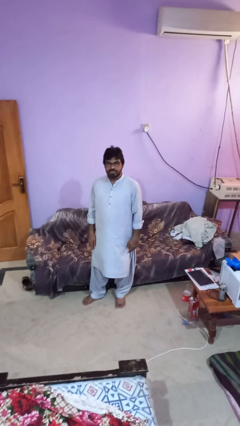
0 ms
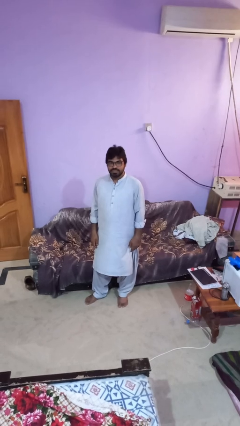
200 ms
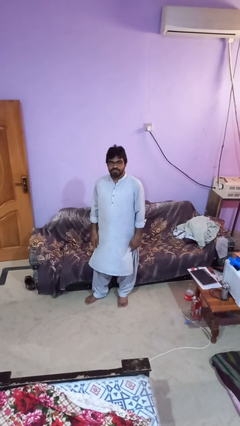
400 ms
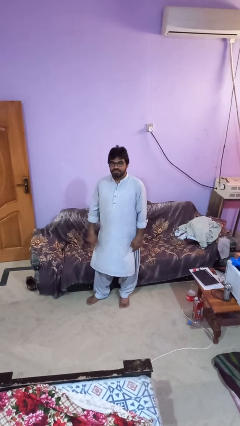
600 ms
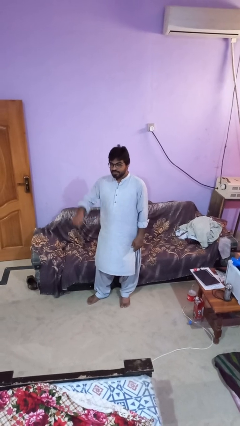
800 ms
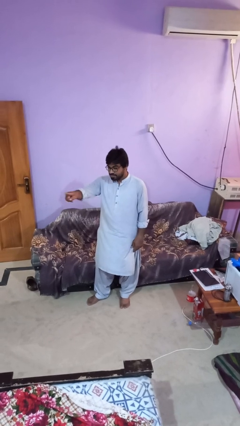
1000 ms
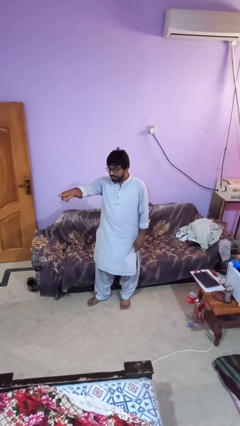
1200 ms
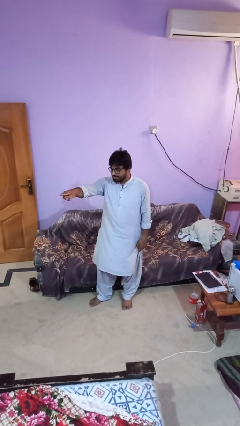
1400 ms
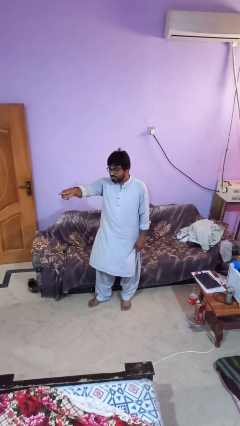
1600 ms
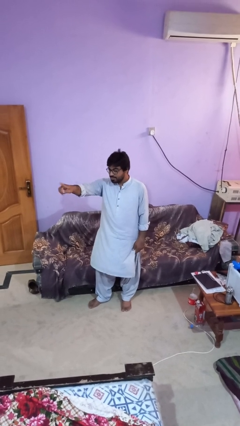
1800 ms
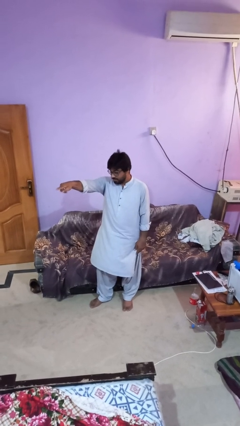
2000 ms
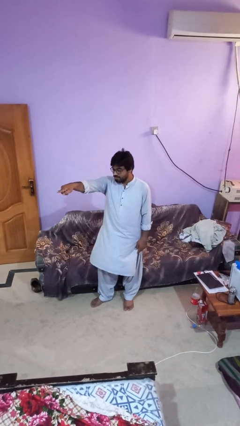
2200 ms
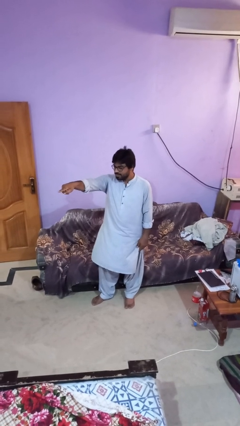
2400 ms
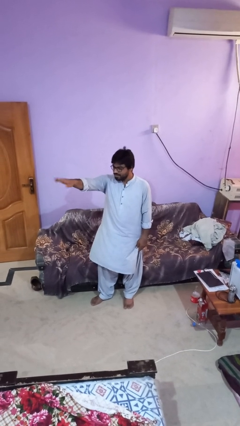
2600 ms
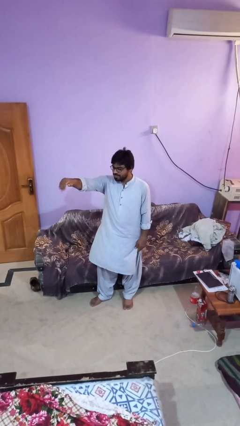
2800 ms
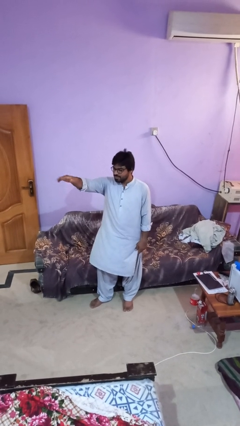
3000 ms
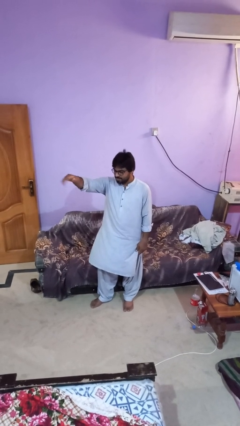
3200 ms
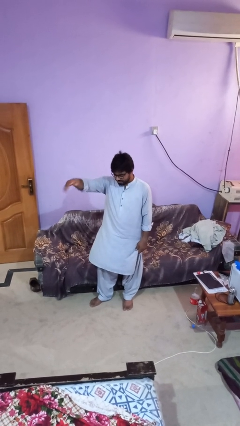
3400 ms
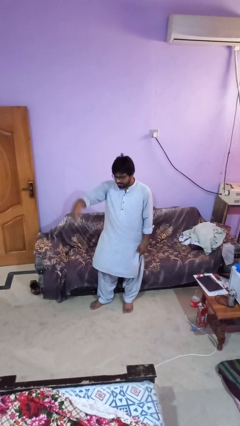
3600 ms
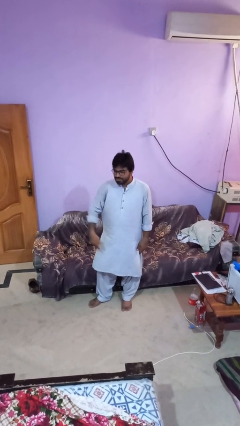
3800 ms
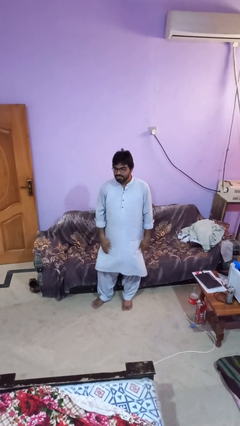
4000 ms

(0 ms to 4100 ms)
person gestures come here

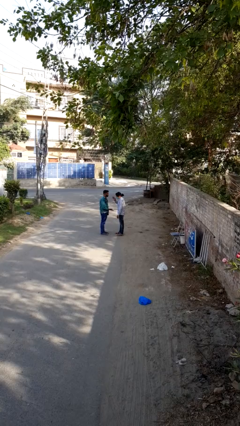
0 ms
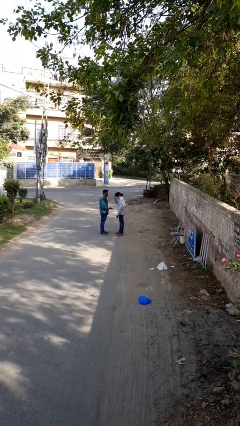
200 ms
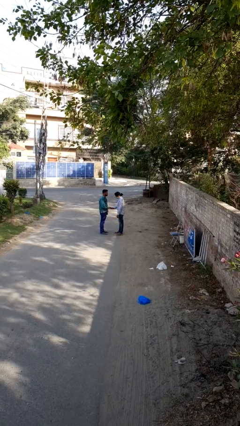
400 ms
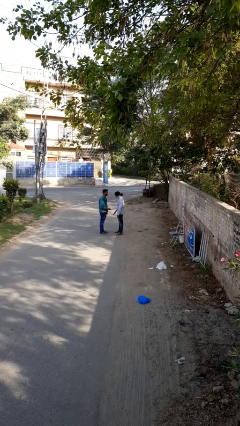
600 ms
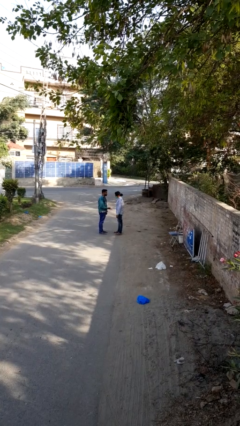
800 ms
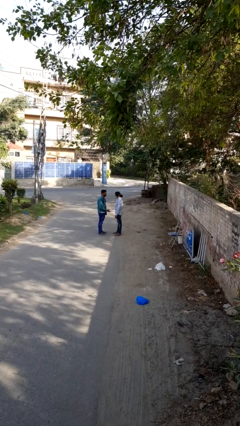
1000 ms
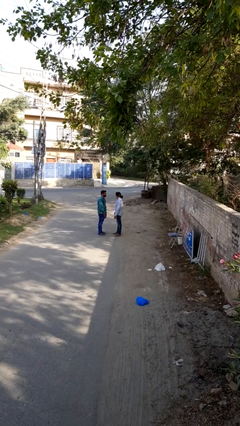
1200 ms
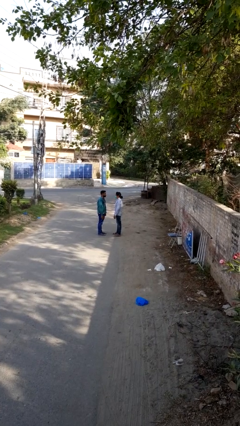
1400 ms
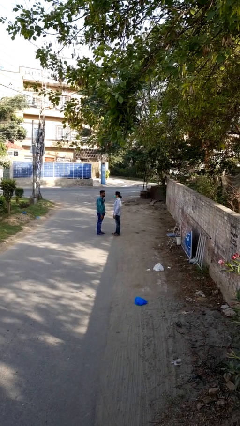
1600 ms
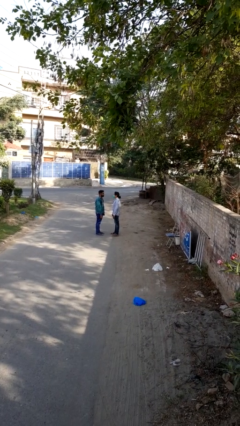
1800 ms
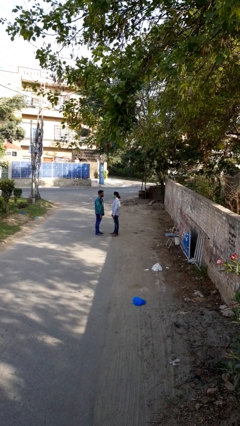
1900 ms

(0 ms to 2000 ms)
person highfives hand

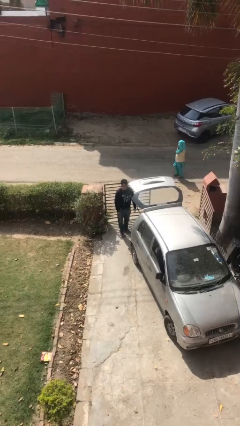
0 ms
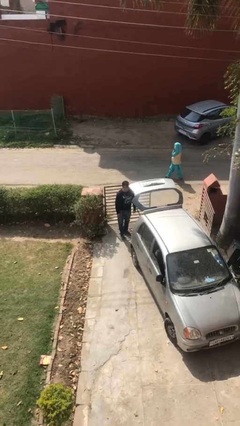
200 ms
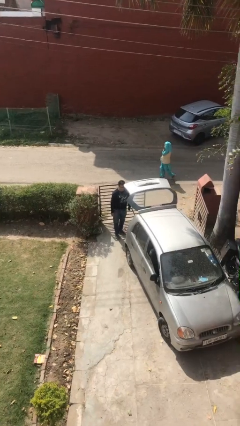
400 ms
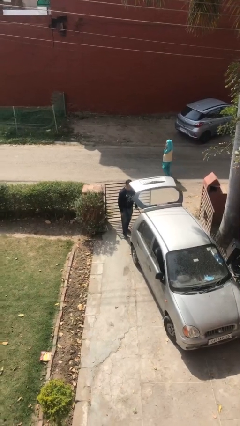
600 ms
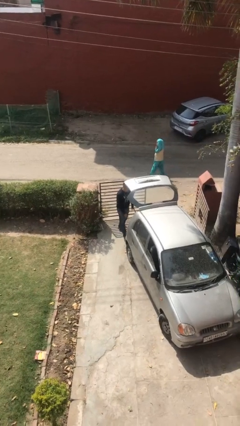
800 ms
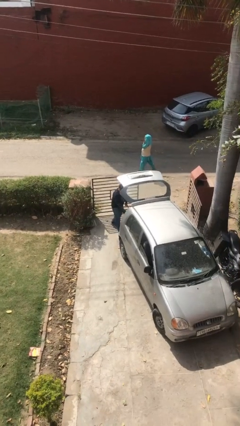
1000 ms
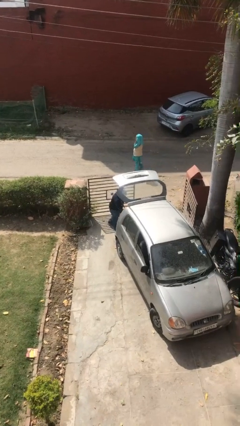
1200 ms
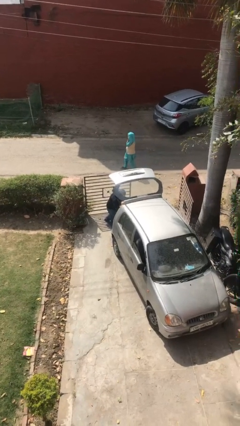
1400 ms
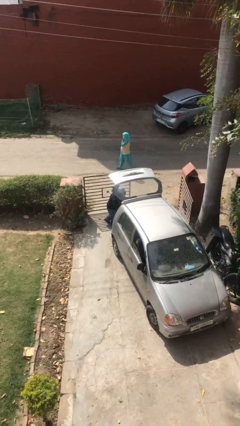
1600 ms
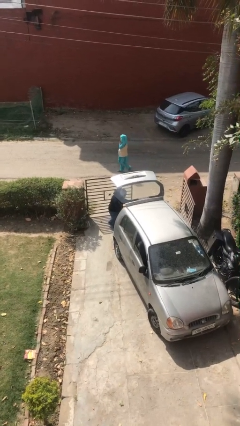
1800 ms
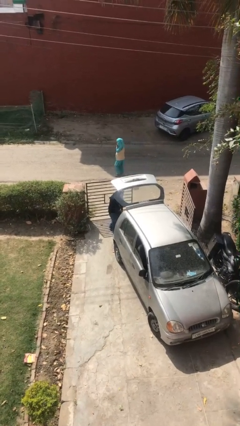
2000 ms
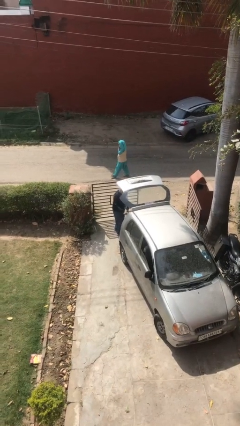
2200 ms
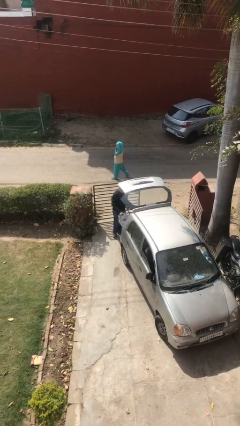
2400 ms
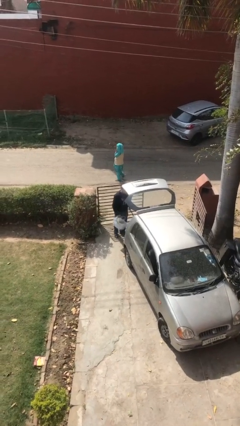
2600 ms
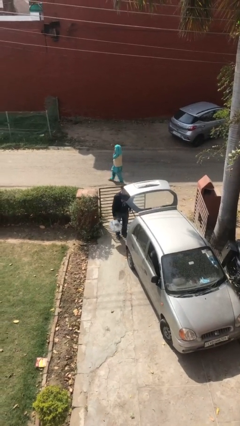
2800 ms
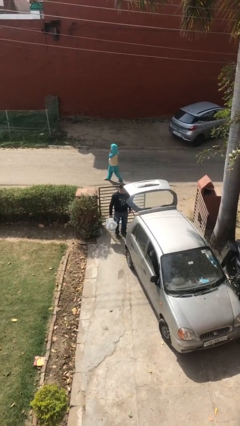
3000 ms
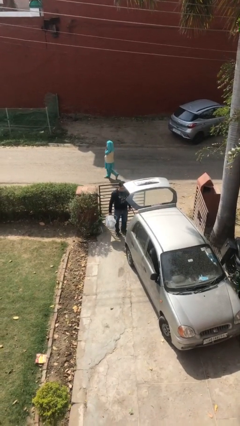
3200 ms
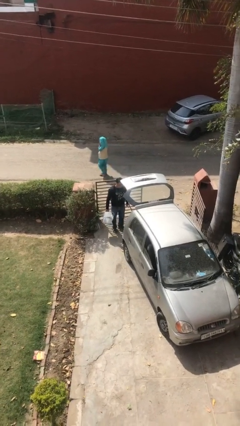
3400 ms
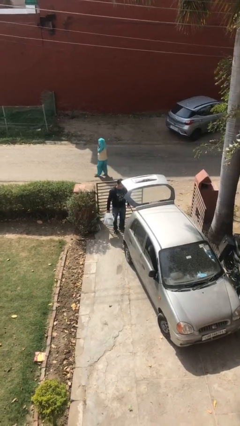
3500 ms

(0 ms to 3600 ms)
person unloads car

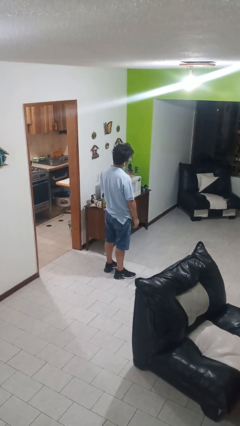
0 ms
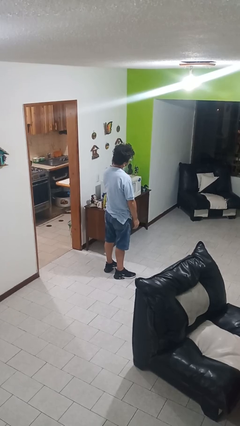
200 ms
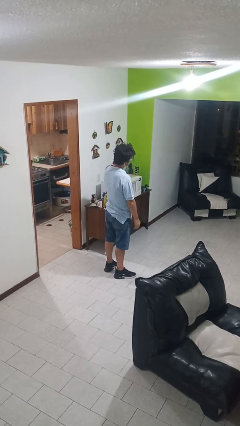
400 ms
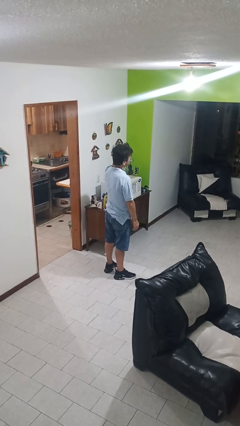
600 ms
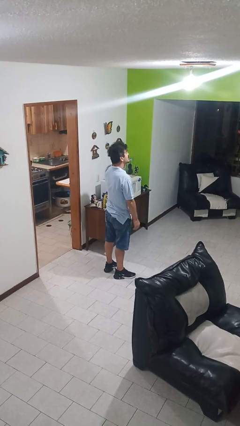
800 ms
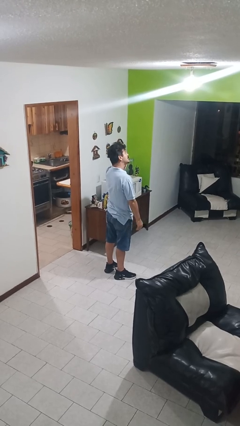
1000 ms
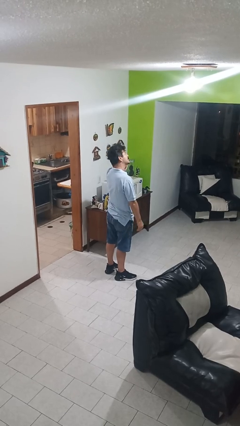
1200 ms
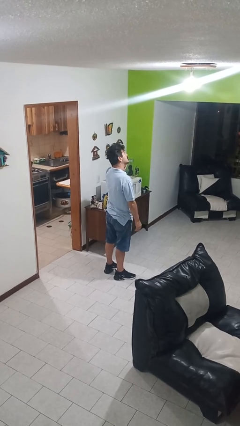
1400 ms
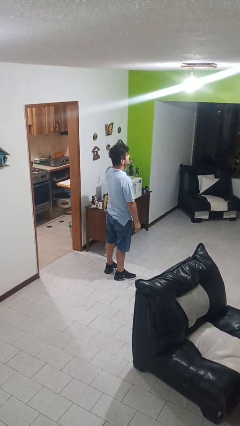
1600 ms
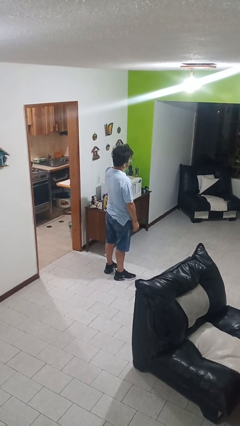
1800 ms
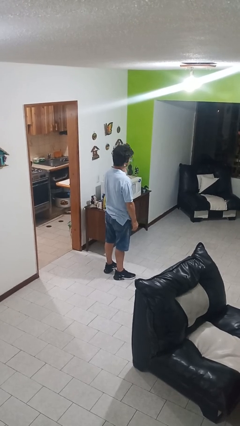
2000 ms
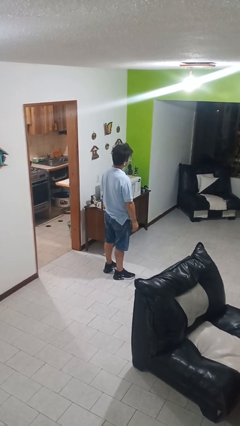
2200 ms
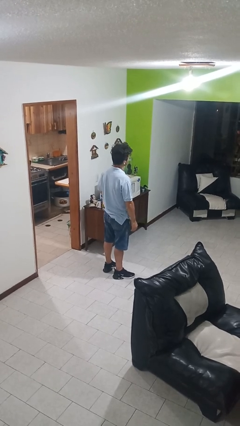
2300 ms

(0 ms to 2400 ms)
person rubs neck

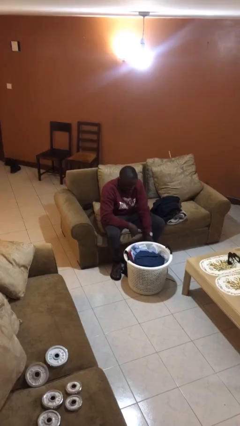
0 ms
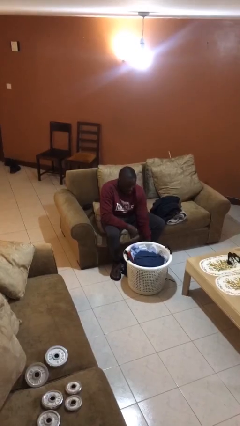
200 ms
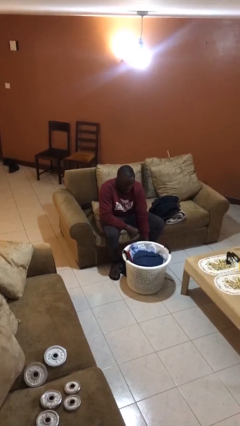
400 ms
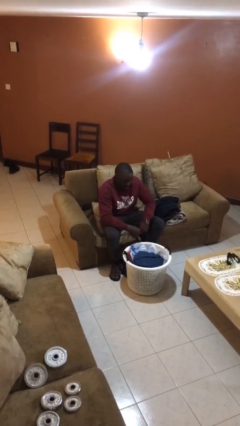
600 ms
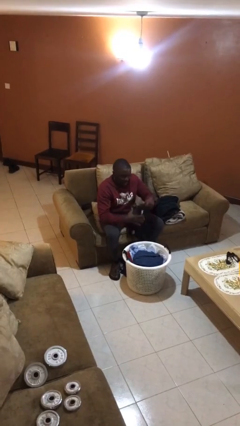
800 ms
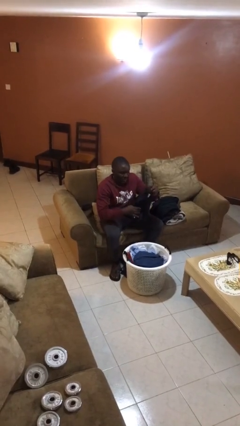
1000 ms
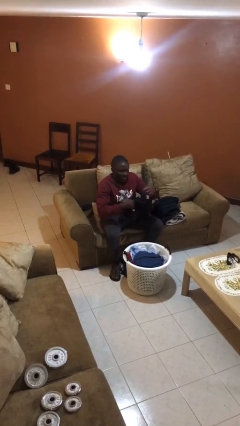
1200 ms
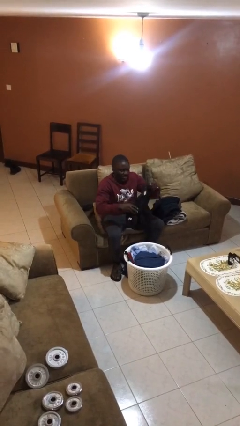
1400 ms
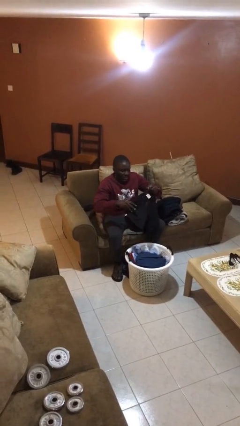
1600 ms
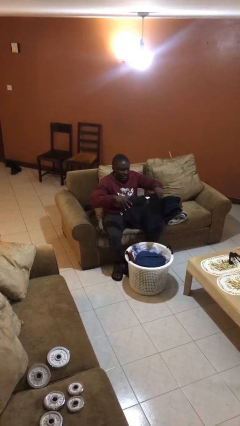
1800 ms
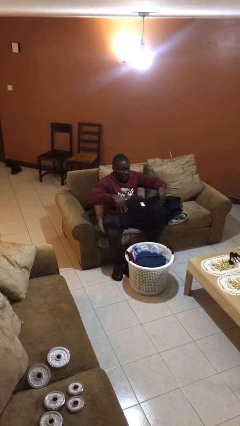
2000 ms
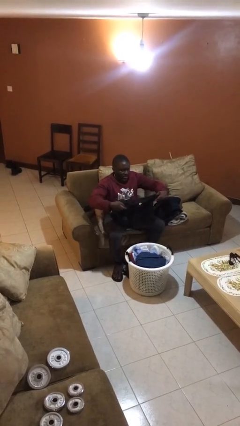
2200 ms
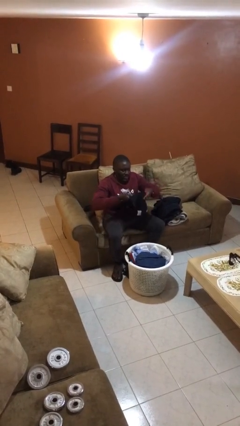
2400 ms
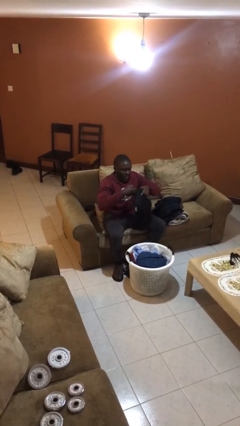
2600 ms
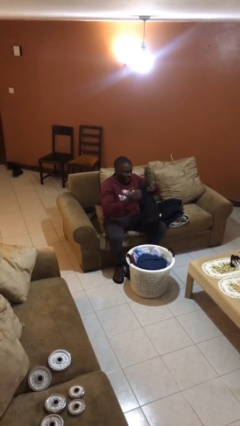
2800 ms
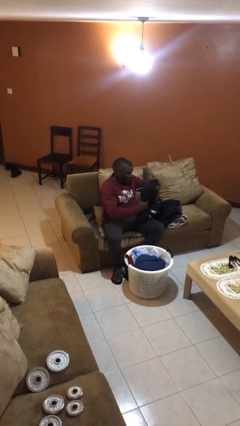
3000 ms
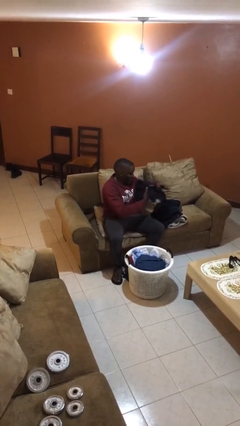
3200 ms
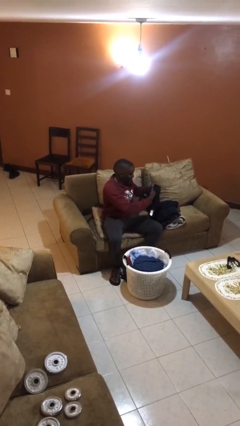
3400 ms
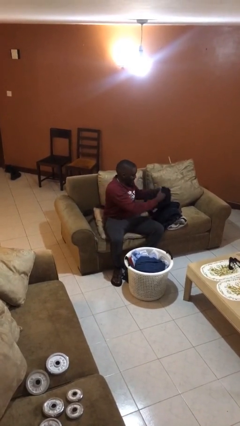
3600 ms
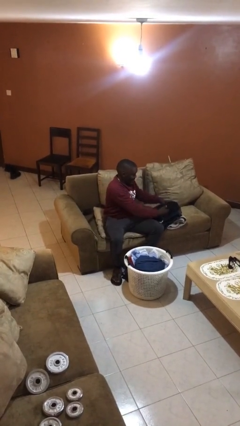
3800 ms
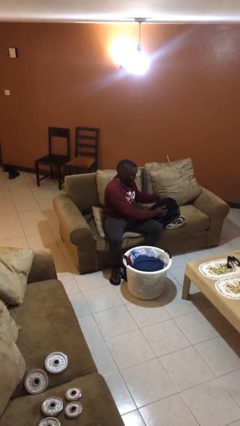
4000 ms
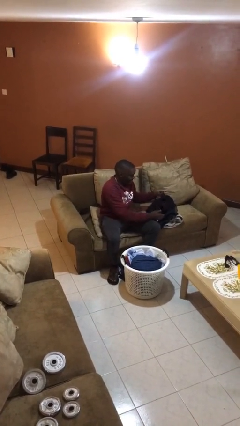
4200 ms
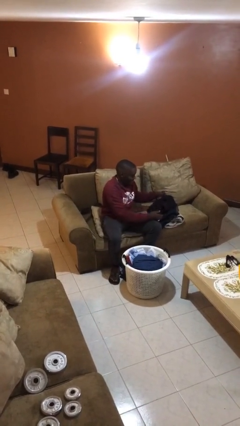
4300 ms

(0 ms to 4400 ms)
person folds pants

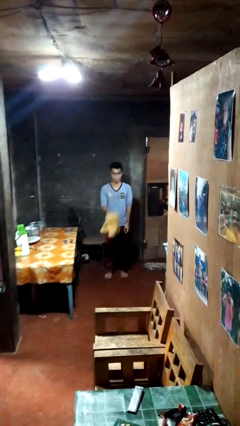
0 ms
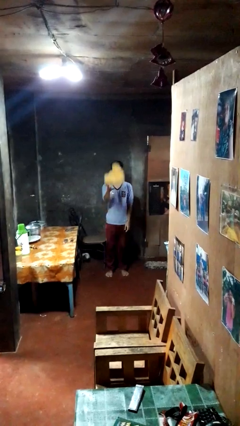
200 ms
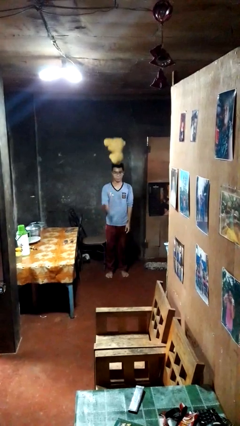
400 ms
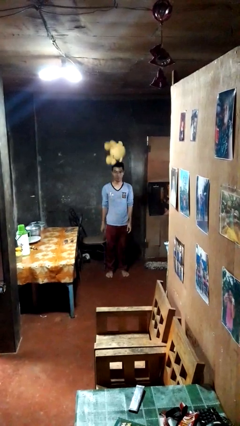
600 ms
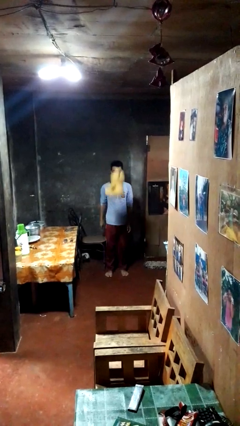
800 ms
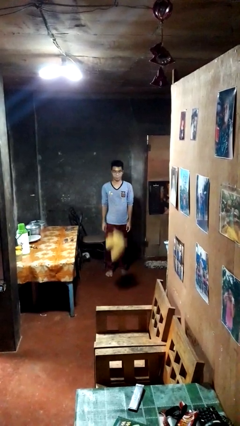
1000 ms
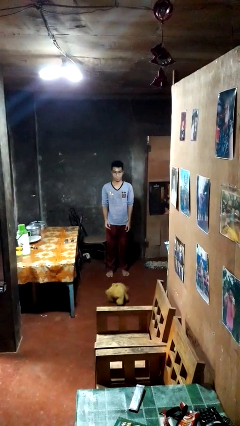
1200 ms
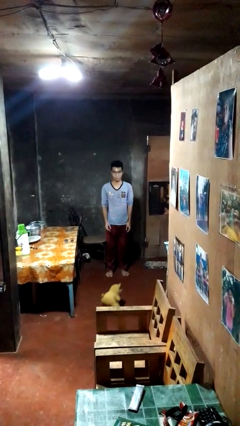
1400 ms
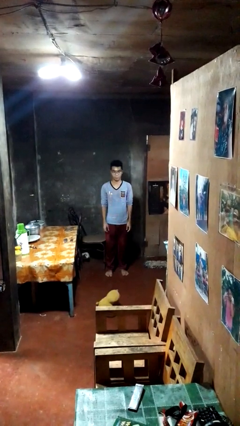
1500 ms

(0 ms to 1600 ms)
person throws object into air
